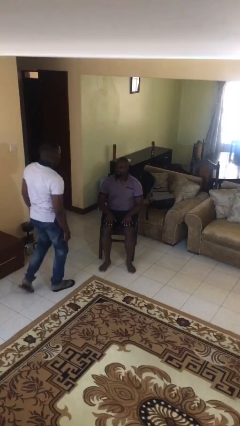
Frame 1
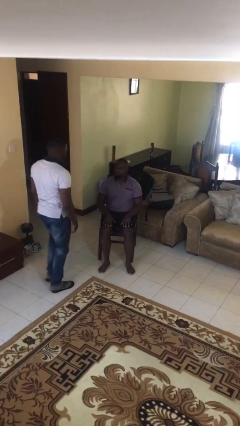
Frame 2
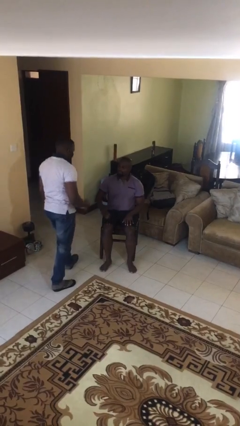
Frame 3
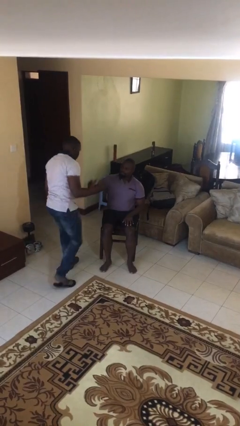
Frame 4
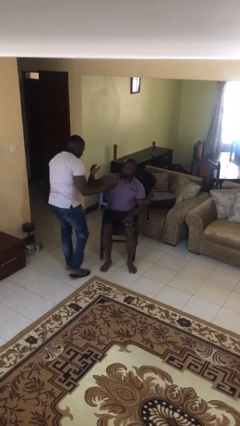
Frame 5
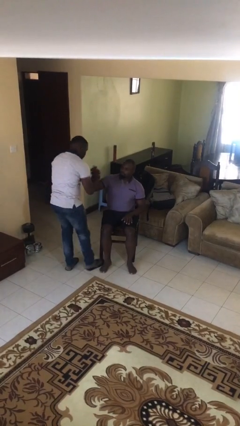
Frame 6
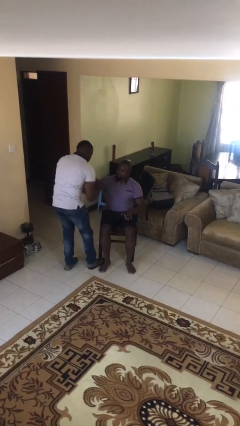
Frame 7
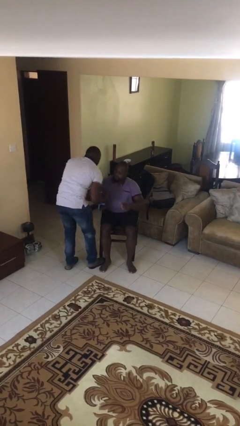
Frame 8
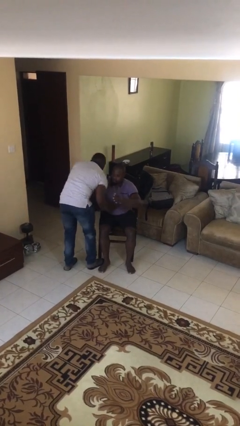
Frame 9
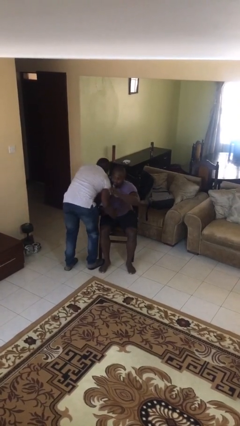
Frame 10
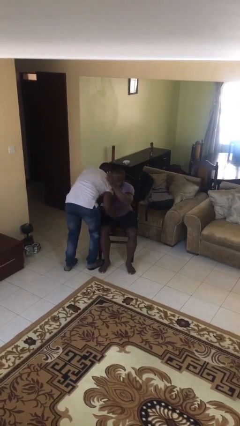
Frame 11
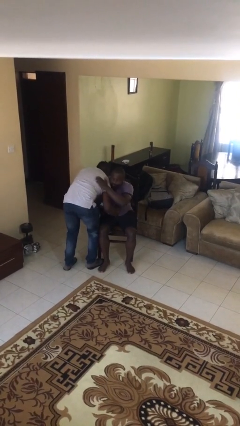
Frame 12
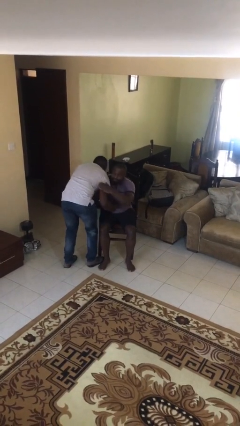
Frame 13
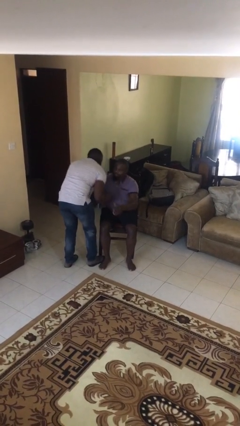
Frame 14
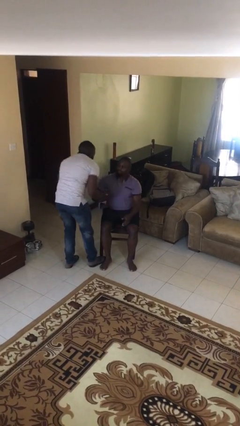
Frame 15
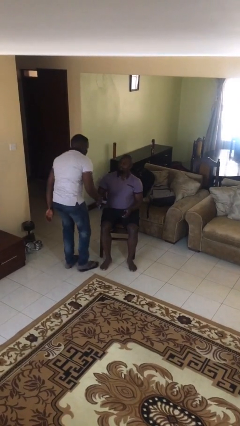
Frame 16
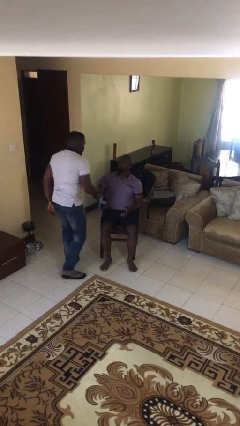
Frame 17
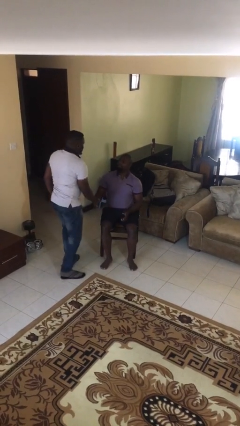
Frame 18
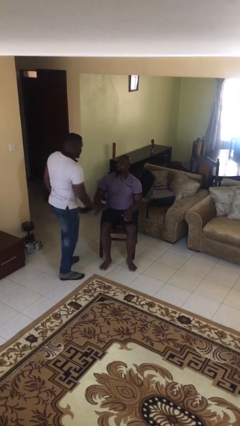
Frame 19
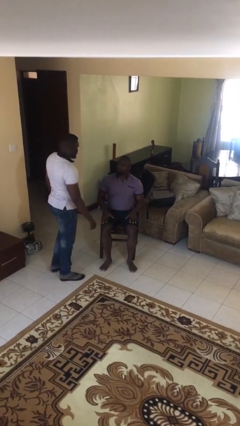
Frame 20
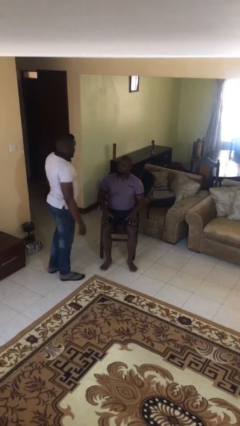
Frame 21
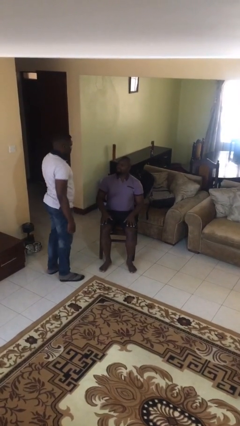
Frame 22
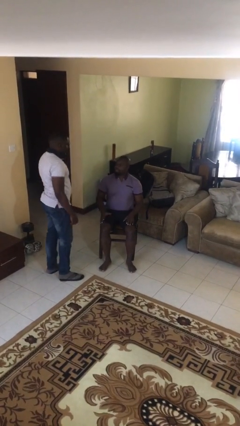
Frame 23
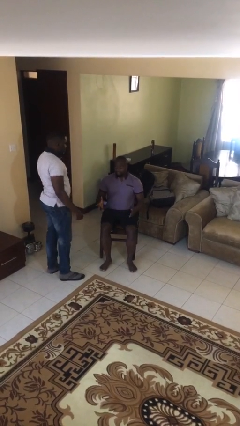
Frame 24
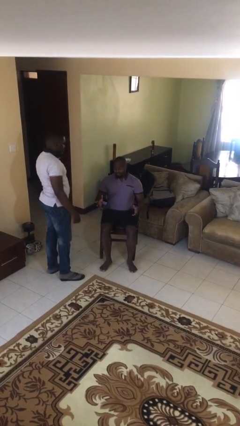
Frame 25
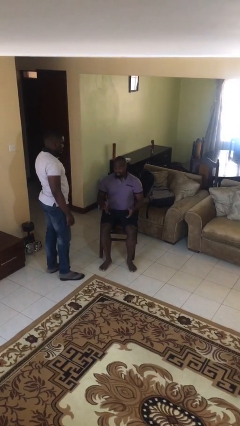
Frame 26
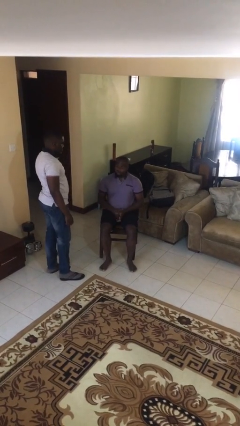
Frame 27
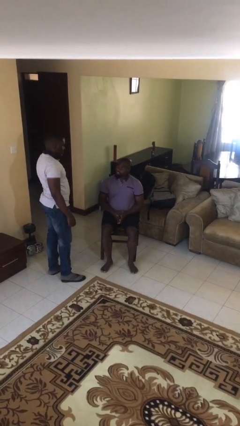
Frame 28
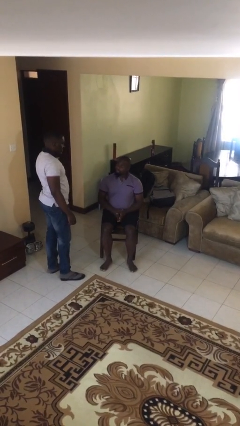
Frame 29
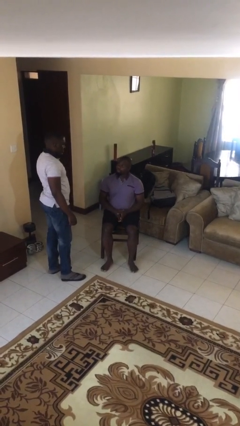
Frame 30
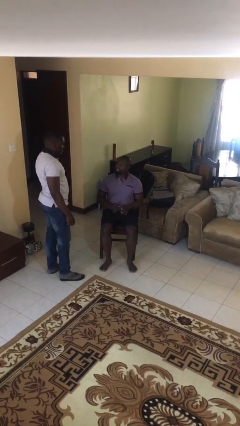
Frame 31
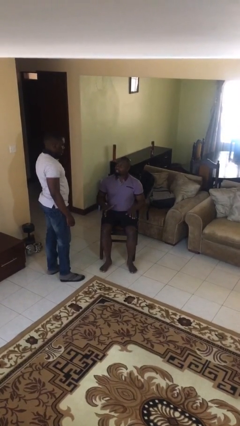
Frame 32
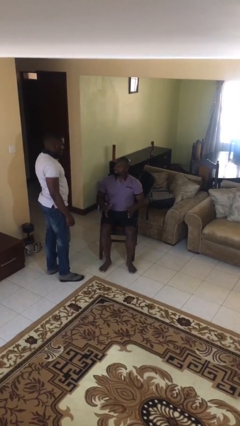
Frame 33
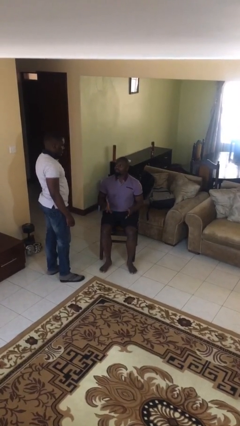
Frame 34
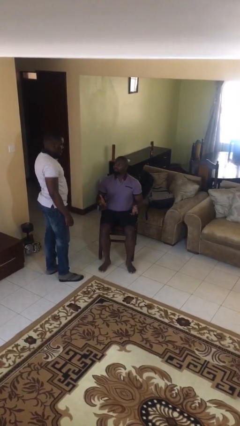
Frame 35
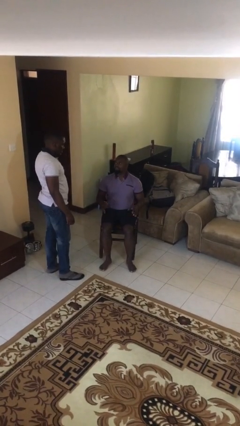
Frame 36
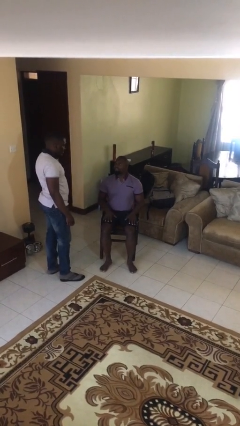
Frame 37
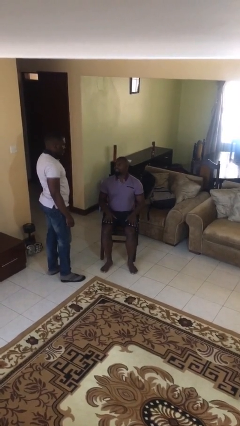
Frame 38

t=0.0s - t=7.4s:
person embraces person

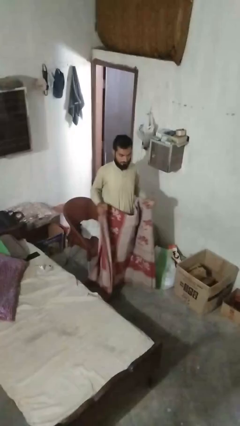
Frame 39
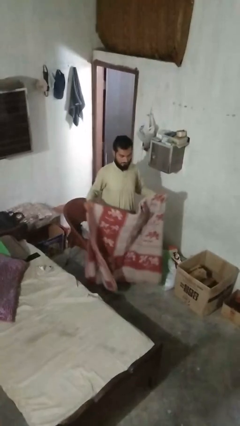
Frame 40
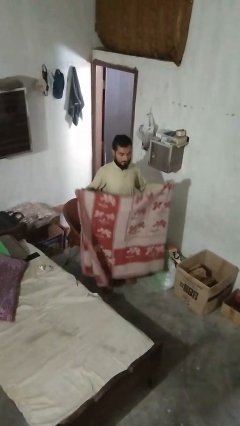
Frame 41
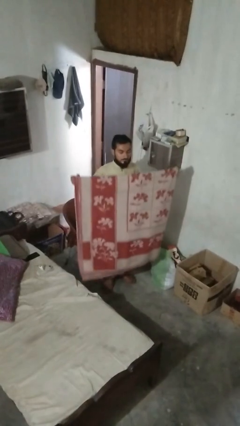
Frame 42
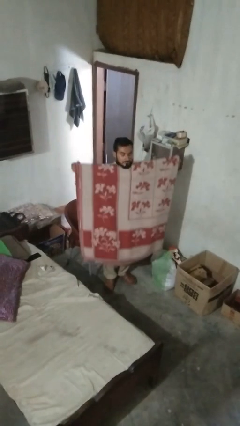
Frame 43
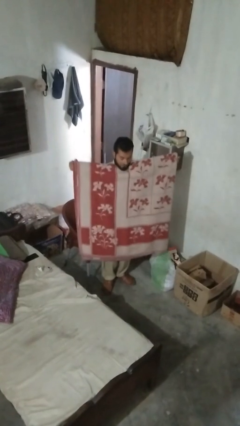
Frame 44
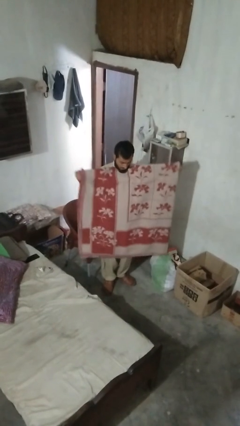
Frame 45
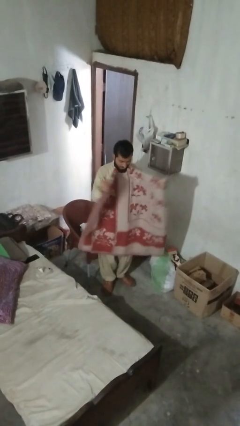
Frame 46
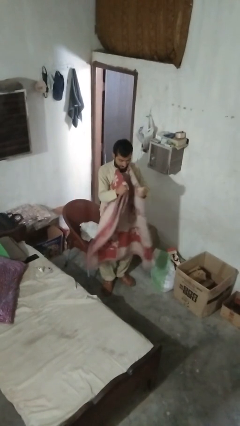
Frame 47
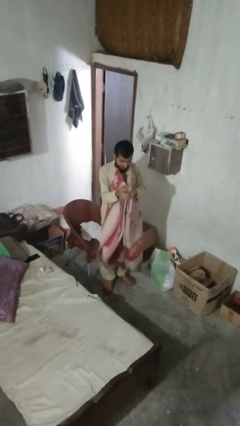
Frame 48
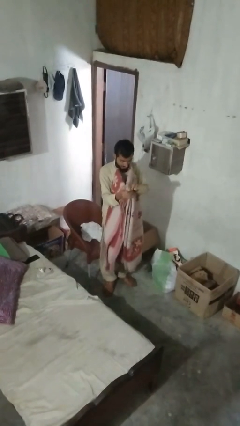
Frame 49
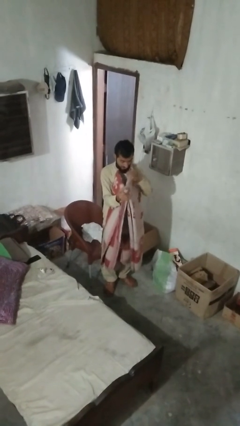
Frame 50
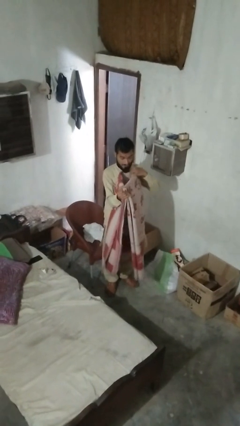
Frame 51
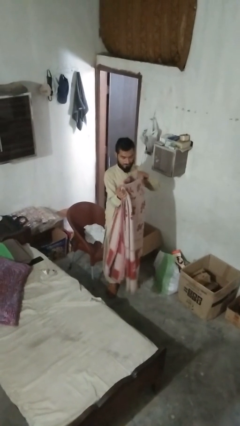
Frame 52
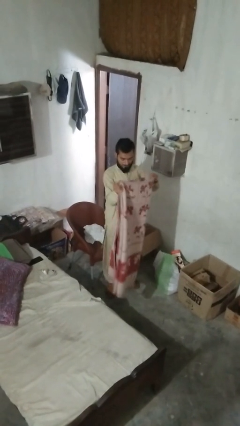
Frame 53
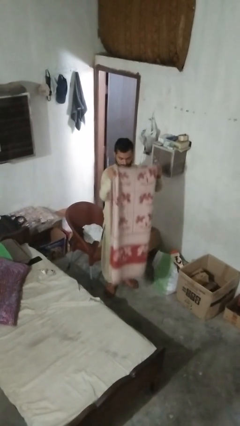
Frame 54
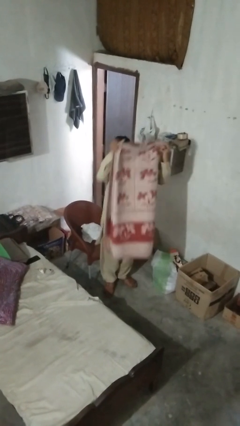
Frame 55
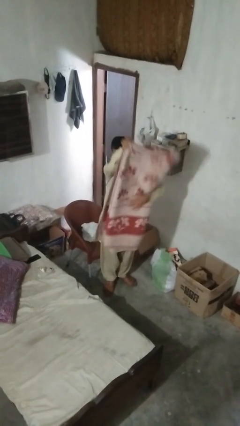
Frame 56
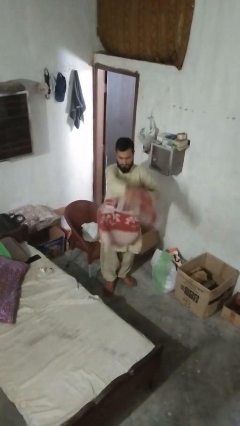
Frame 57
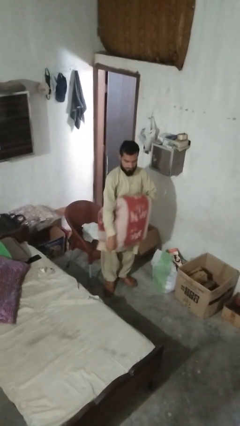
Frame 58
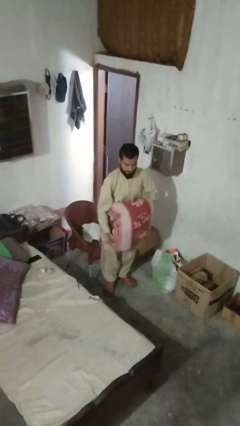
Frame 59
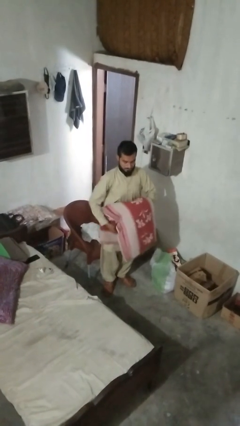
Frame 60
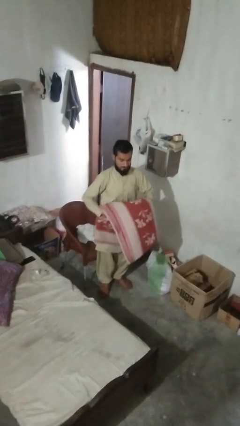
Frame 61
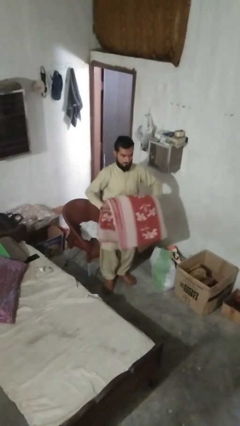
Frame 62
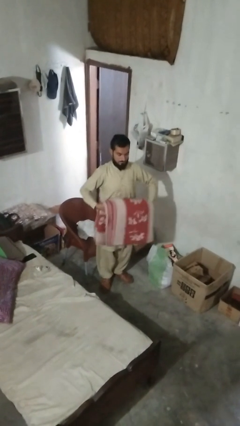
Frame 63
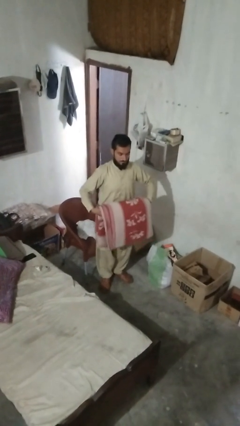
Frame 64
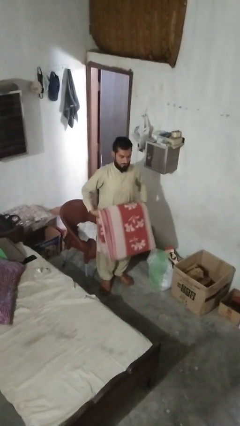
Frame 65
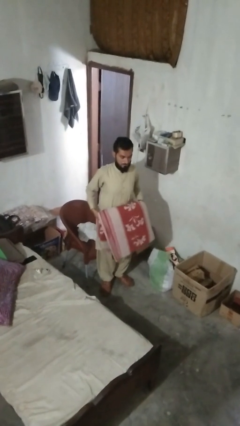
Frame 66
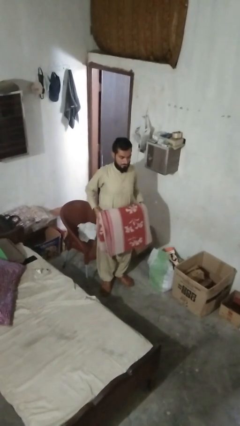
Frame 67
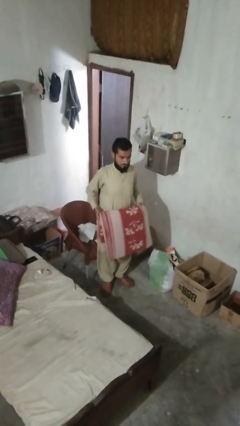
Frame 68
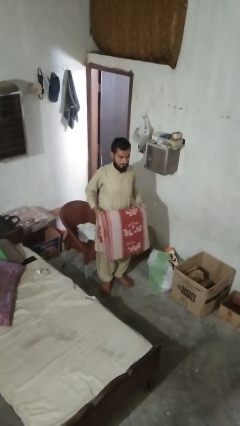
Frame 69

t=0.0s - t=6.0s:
person folds blanket

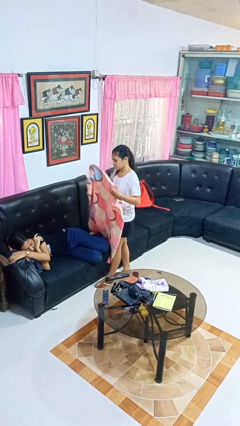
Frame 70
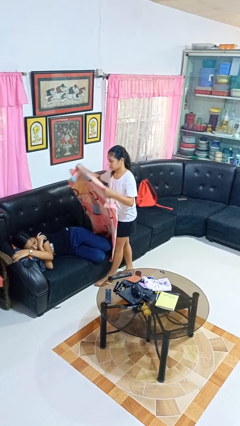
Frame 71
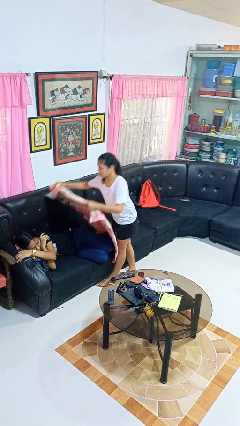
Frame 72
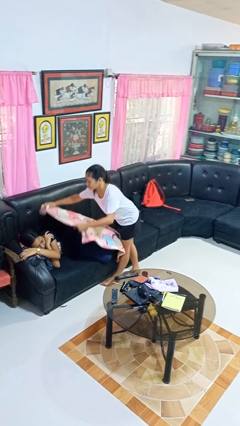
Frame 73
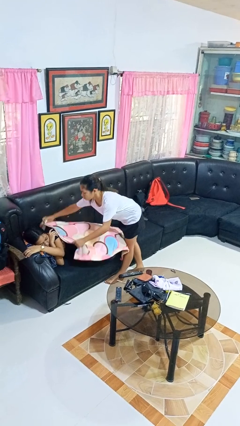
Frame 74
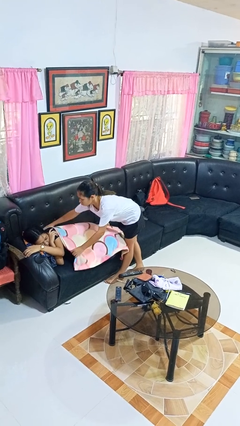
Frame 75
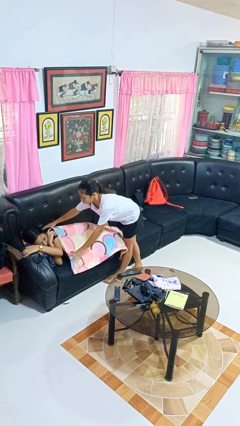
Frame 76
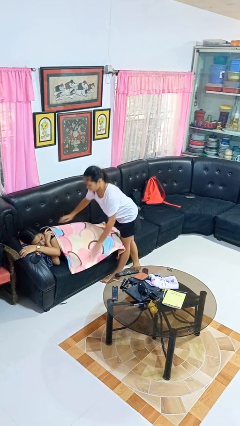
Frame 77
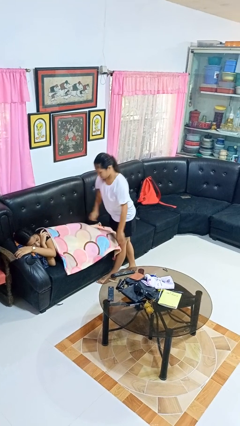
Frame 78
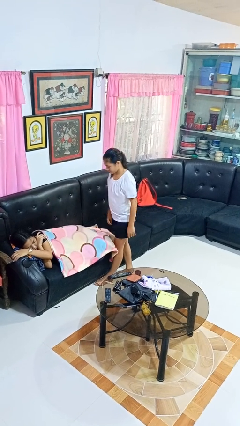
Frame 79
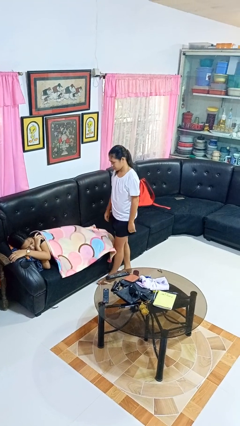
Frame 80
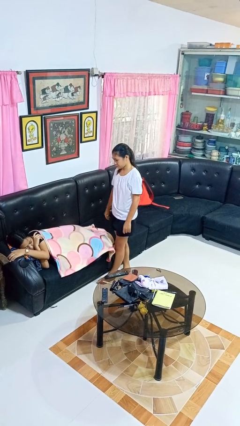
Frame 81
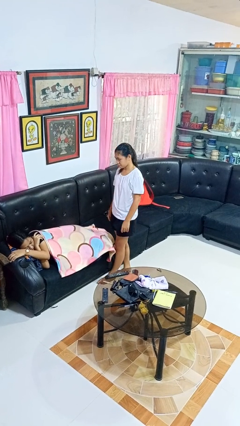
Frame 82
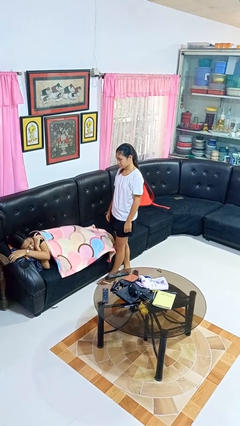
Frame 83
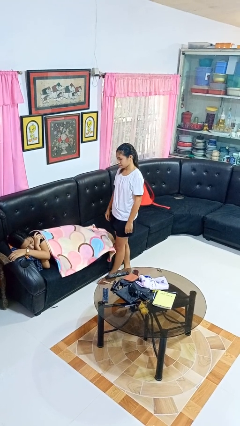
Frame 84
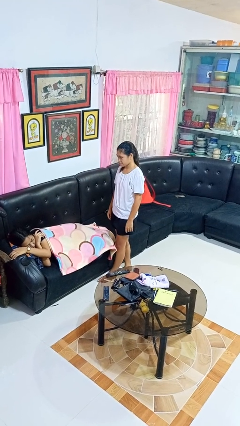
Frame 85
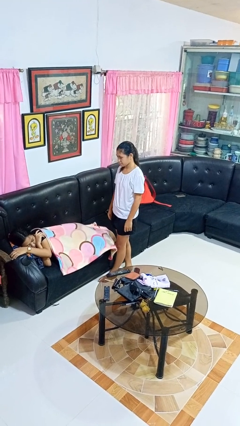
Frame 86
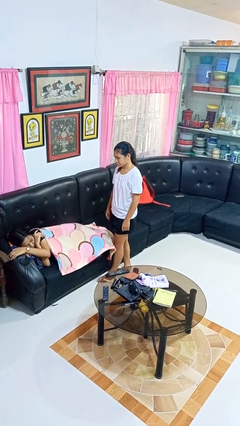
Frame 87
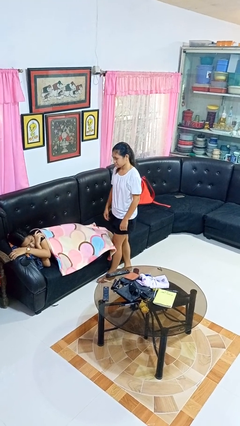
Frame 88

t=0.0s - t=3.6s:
person covers friend with blanket

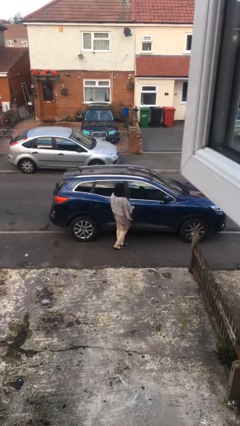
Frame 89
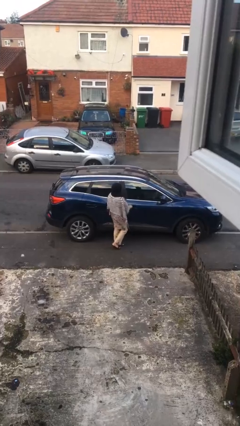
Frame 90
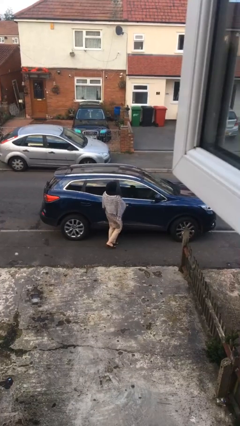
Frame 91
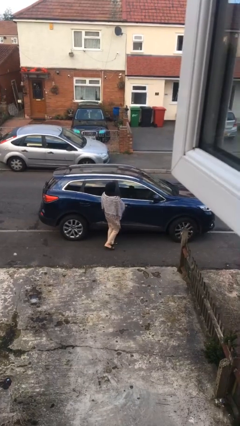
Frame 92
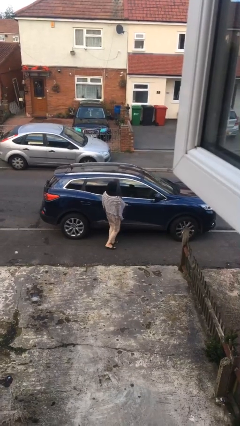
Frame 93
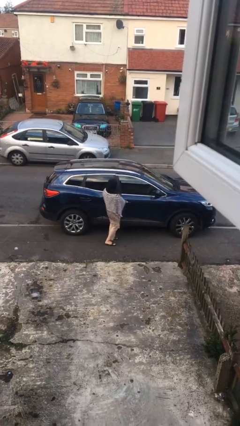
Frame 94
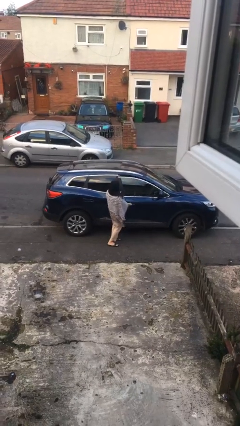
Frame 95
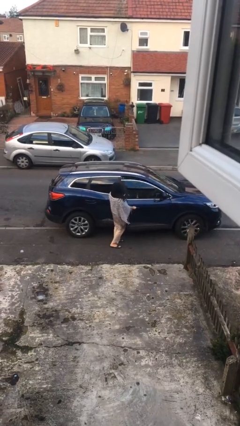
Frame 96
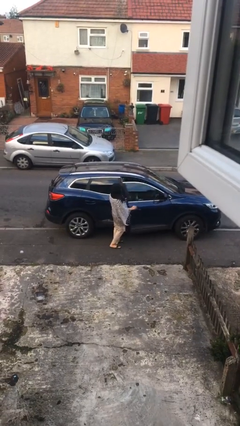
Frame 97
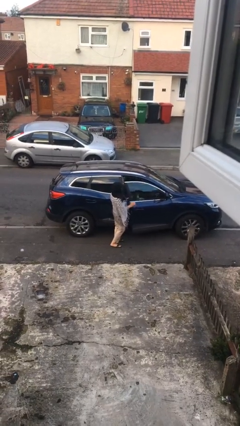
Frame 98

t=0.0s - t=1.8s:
person opens car door
